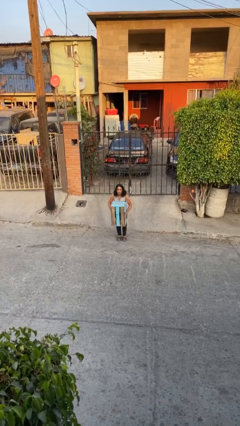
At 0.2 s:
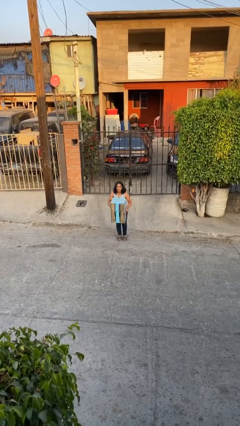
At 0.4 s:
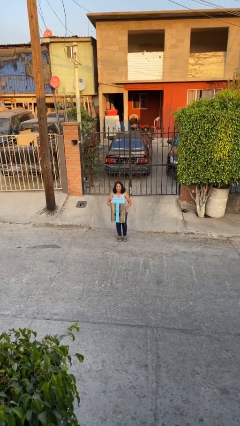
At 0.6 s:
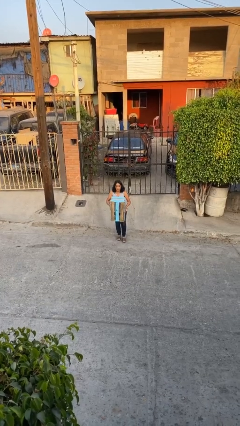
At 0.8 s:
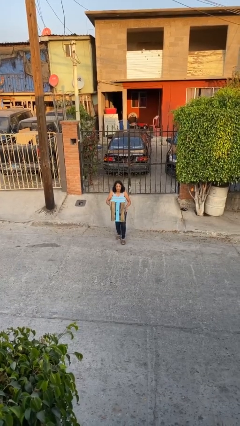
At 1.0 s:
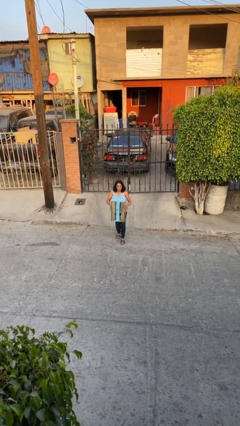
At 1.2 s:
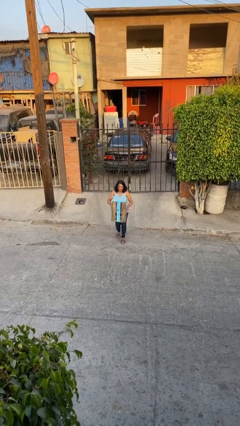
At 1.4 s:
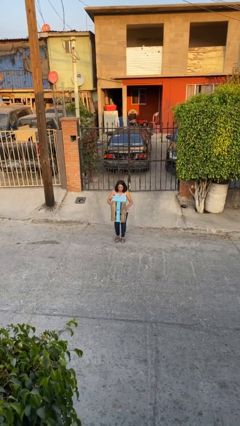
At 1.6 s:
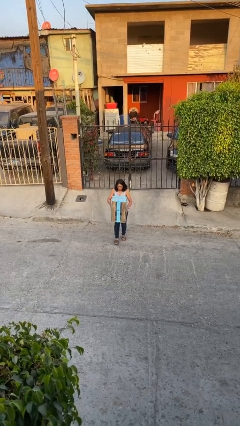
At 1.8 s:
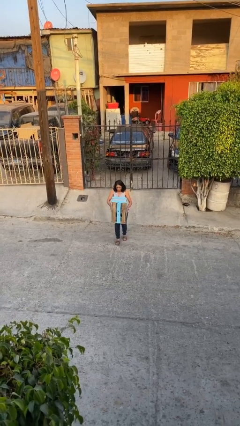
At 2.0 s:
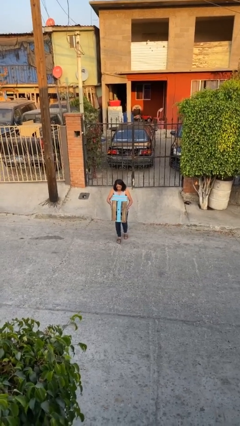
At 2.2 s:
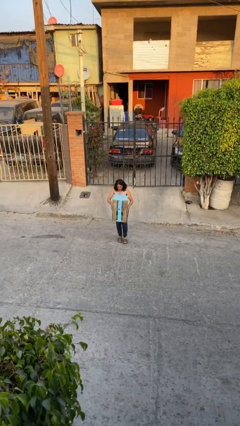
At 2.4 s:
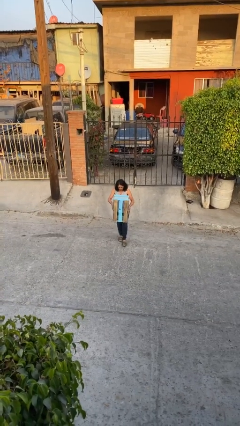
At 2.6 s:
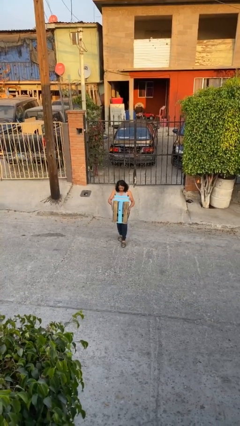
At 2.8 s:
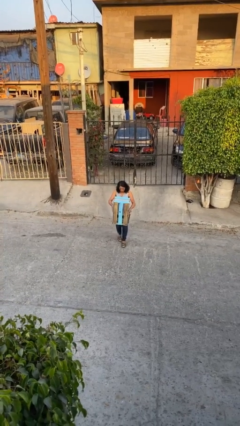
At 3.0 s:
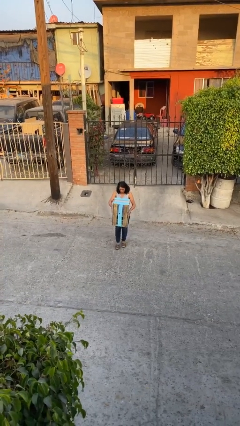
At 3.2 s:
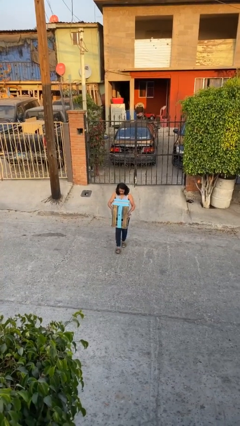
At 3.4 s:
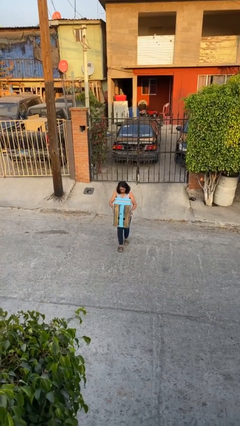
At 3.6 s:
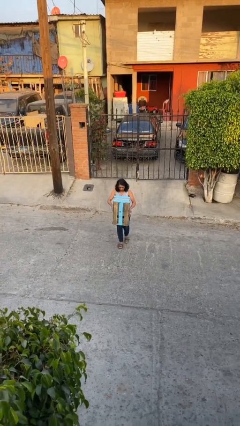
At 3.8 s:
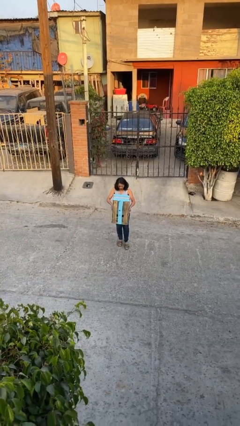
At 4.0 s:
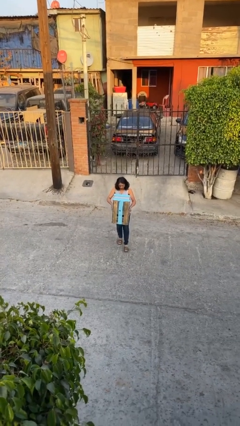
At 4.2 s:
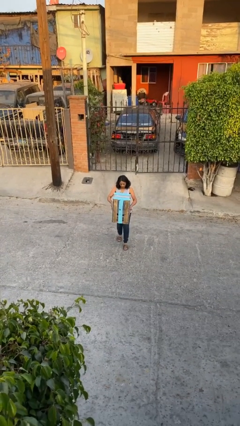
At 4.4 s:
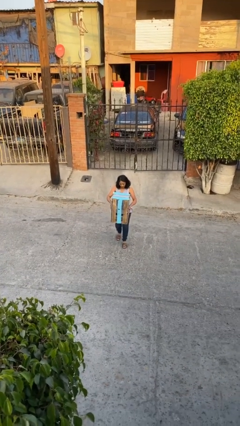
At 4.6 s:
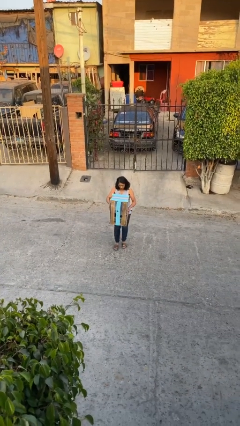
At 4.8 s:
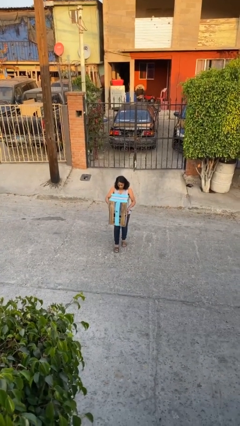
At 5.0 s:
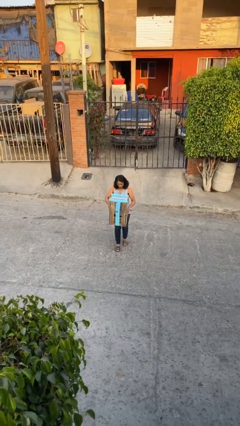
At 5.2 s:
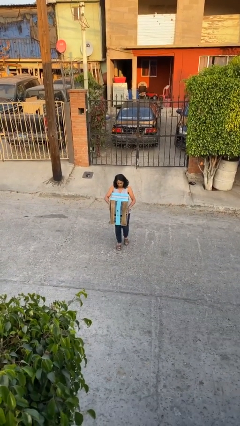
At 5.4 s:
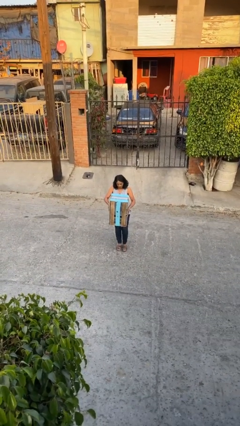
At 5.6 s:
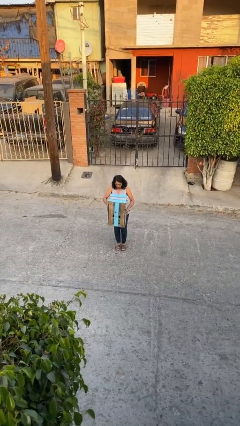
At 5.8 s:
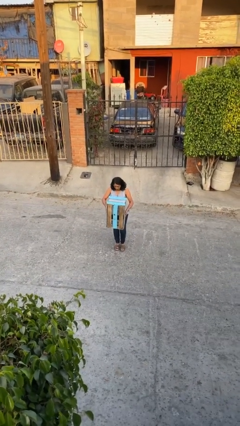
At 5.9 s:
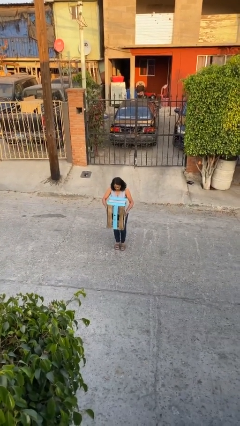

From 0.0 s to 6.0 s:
person carries heavy object

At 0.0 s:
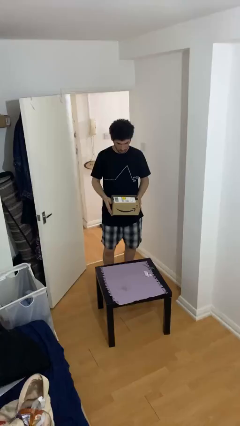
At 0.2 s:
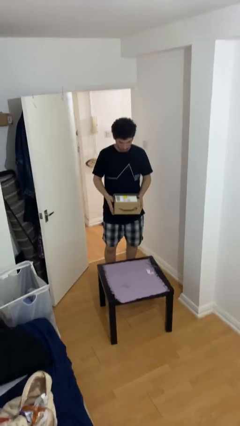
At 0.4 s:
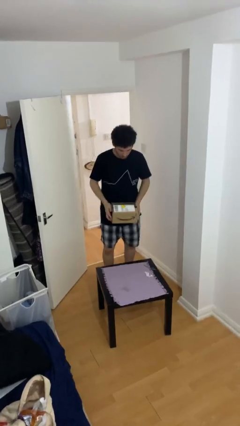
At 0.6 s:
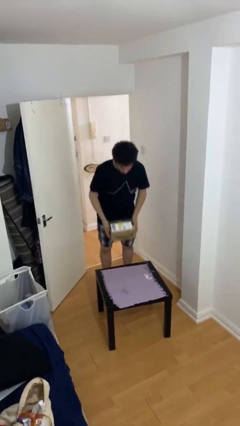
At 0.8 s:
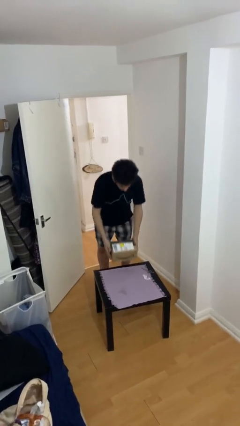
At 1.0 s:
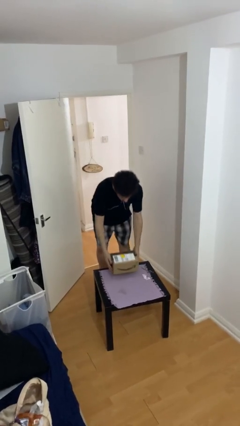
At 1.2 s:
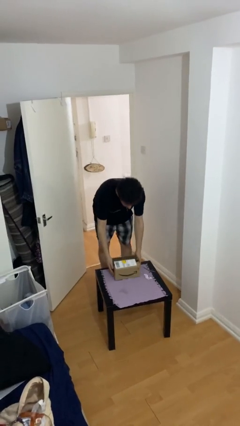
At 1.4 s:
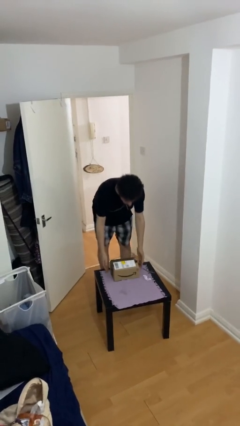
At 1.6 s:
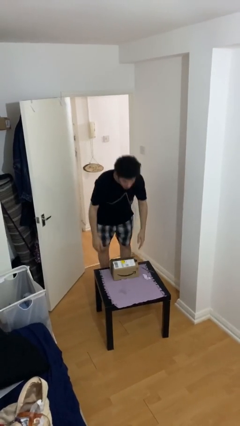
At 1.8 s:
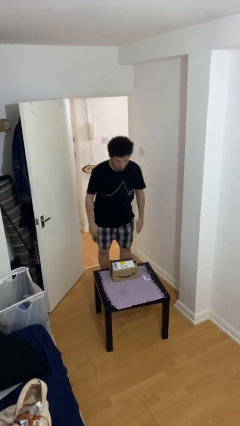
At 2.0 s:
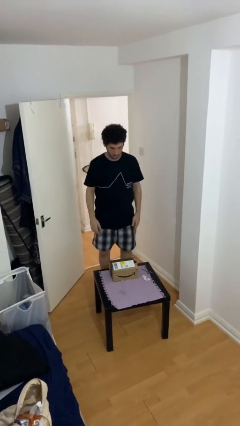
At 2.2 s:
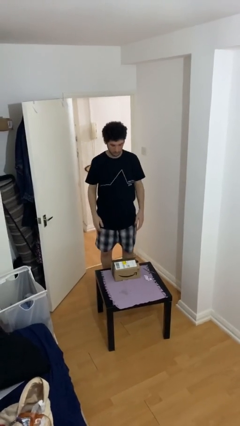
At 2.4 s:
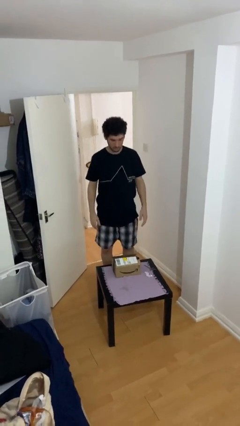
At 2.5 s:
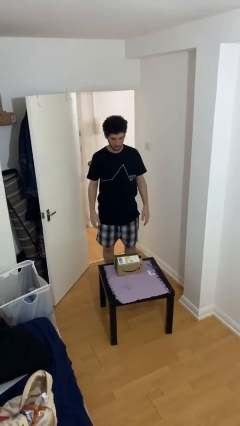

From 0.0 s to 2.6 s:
person puts down object on table

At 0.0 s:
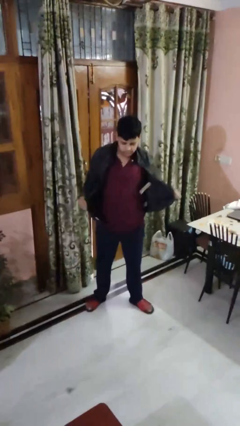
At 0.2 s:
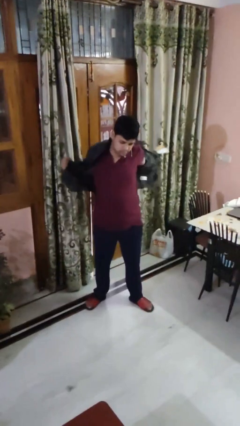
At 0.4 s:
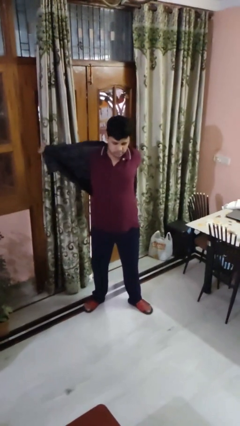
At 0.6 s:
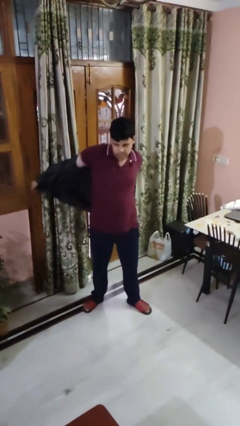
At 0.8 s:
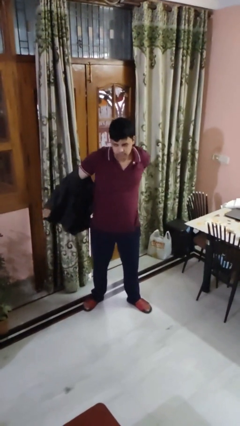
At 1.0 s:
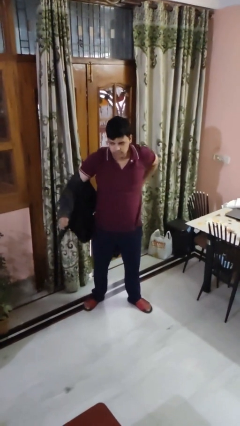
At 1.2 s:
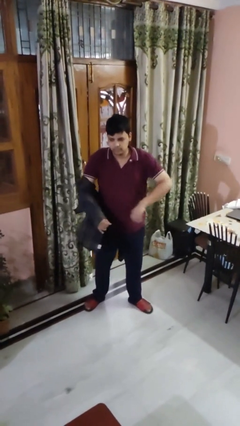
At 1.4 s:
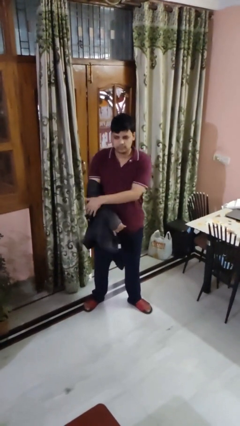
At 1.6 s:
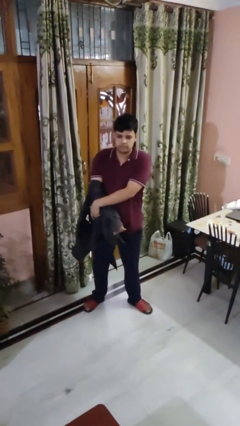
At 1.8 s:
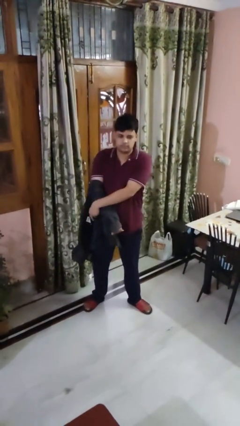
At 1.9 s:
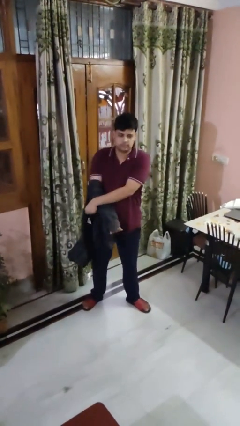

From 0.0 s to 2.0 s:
person takes off shirt

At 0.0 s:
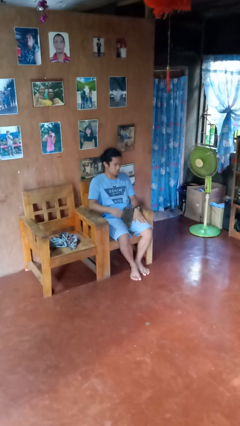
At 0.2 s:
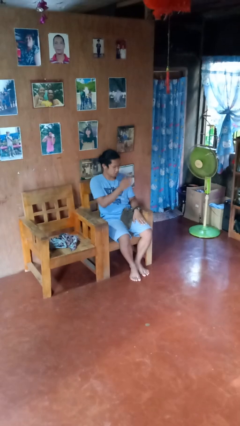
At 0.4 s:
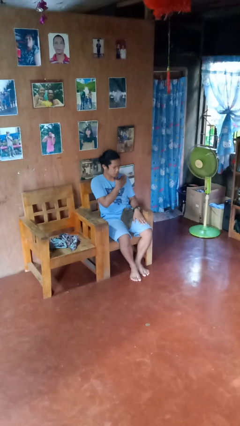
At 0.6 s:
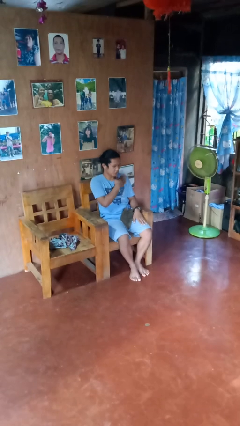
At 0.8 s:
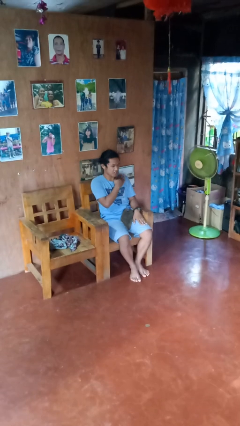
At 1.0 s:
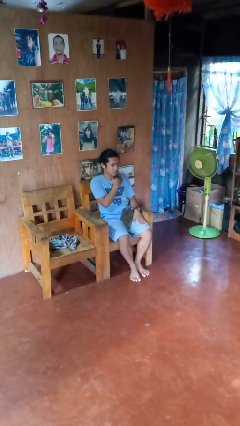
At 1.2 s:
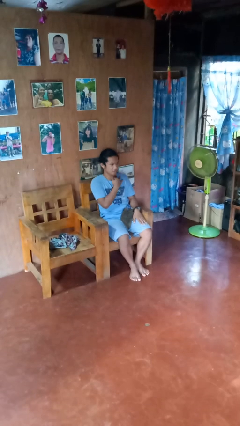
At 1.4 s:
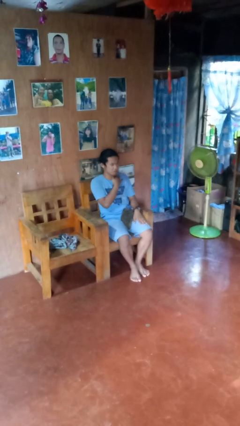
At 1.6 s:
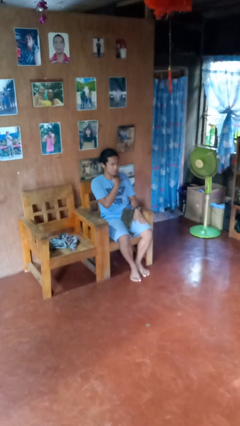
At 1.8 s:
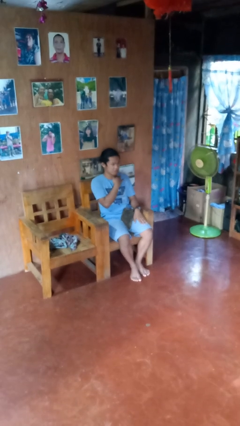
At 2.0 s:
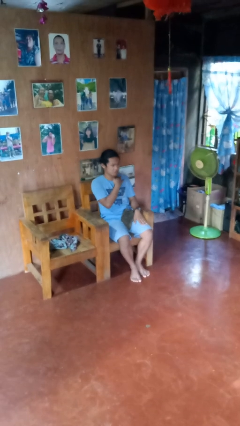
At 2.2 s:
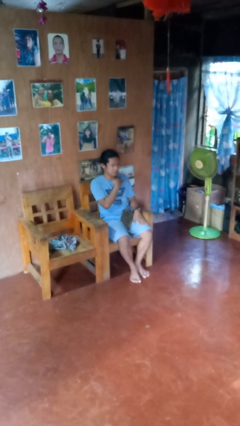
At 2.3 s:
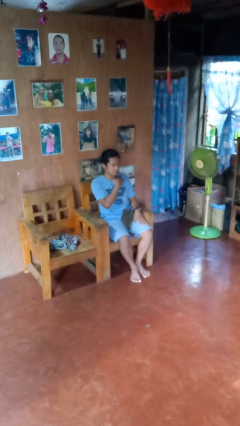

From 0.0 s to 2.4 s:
person swats bug

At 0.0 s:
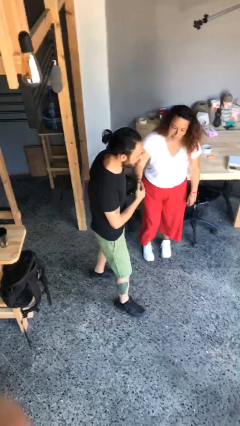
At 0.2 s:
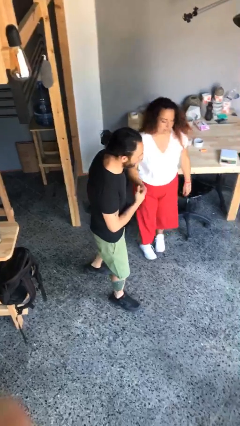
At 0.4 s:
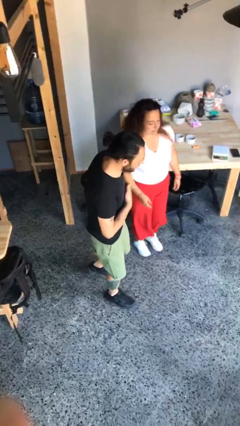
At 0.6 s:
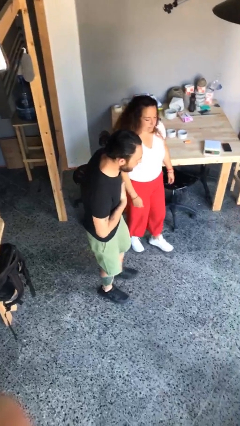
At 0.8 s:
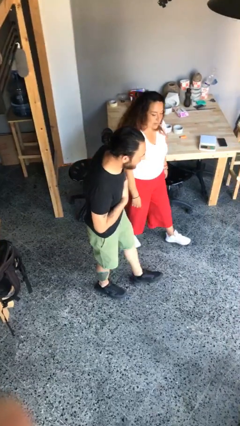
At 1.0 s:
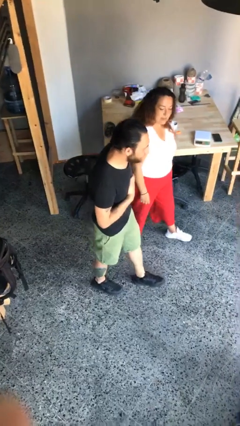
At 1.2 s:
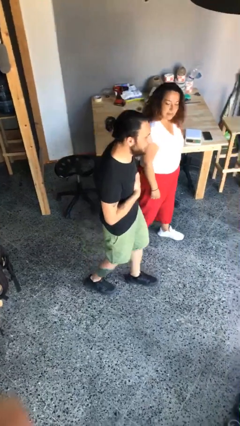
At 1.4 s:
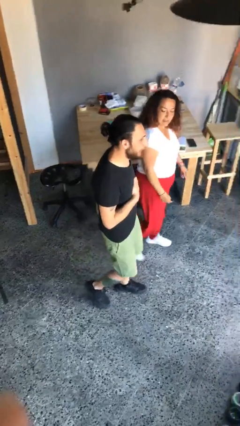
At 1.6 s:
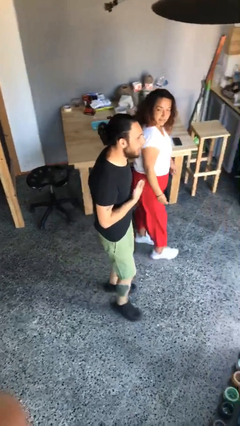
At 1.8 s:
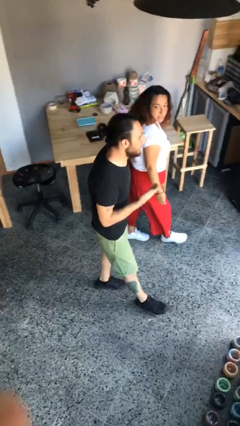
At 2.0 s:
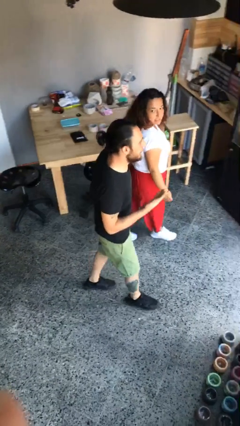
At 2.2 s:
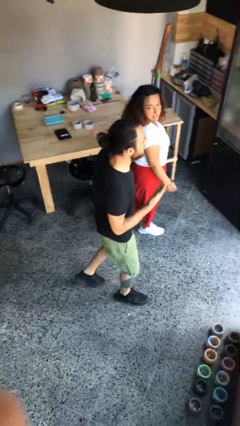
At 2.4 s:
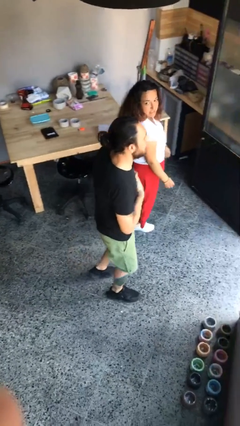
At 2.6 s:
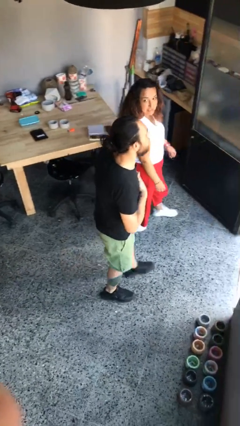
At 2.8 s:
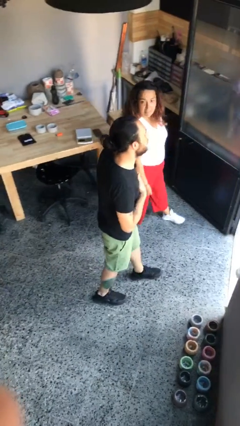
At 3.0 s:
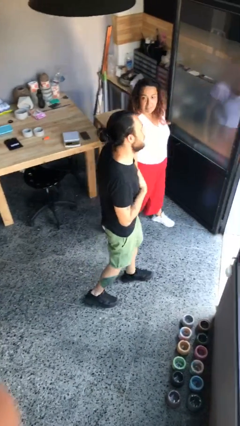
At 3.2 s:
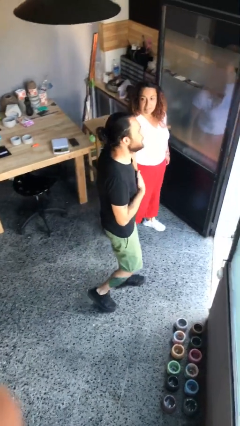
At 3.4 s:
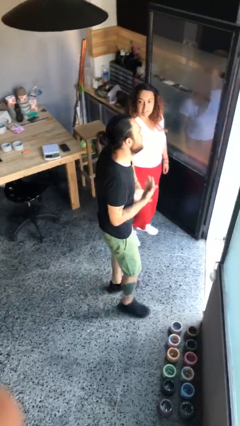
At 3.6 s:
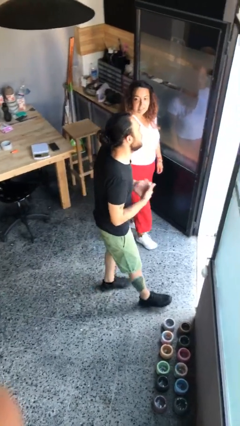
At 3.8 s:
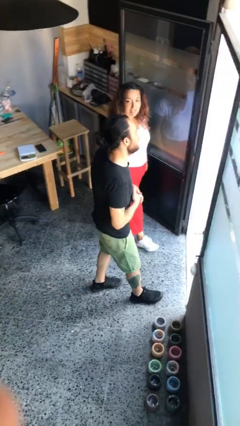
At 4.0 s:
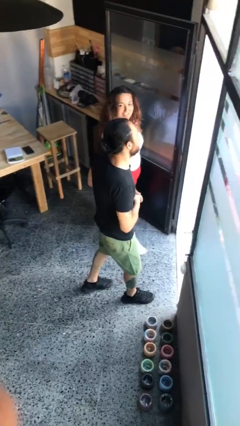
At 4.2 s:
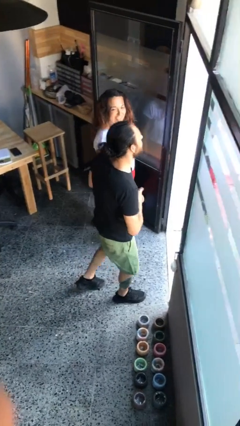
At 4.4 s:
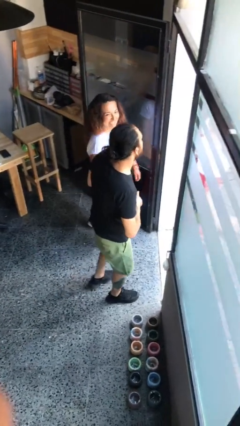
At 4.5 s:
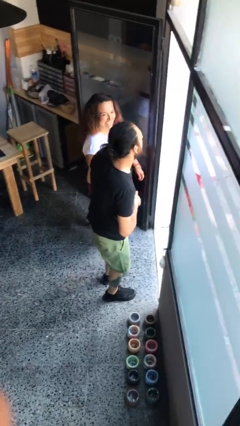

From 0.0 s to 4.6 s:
person talks to person
